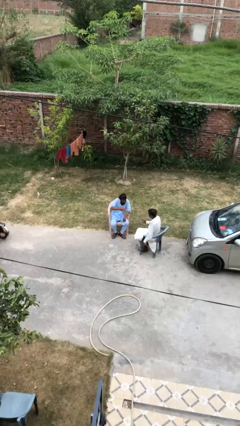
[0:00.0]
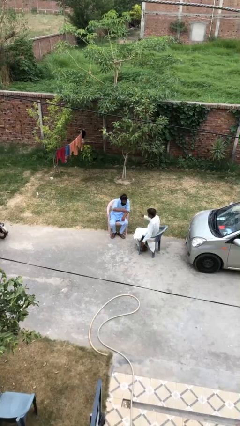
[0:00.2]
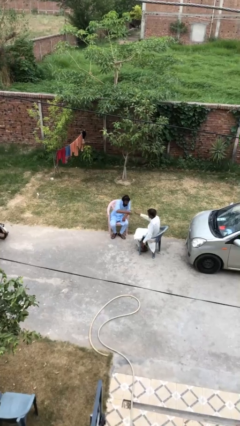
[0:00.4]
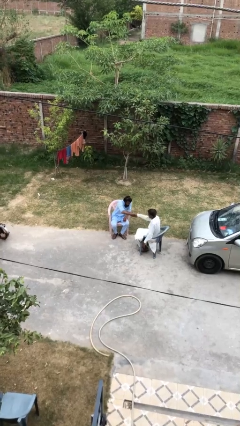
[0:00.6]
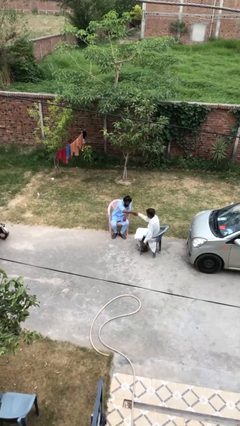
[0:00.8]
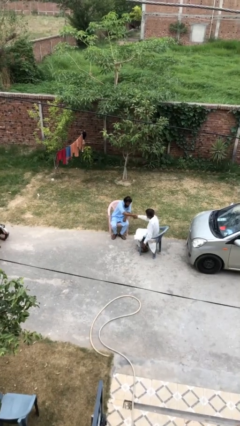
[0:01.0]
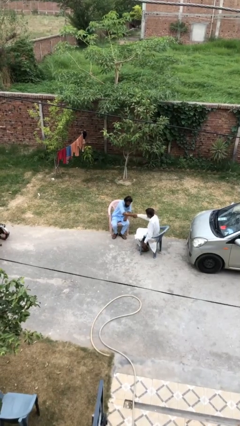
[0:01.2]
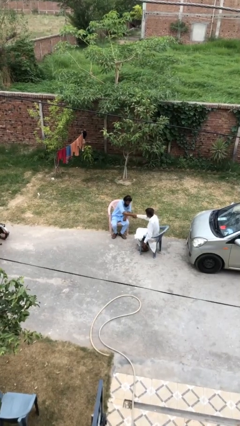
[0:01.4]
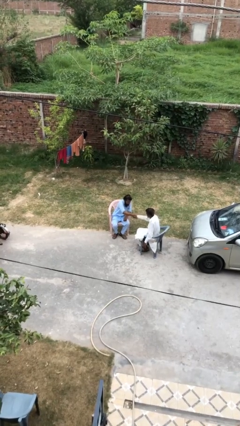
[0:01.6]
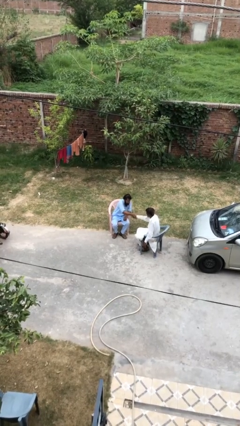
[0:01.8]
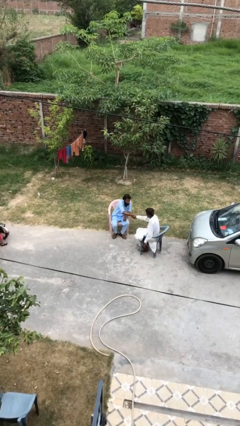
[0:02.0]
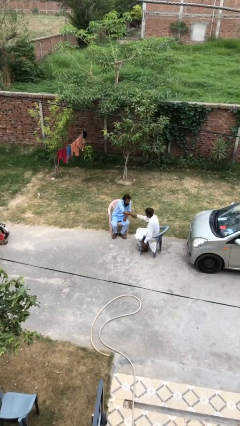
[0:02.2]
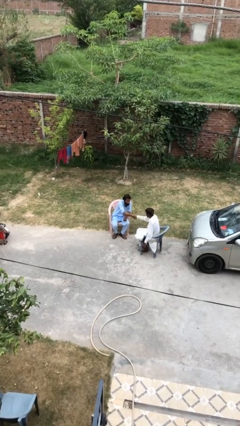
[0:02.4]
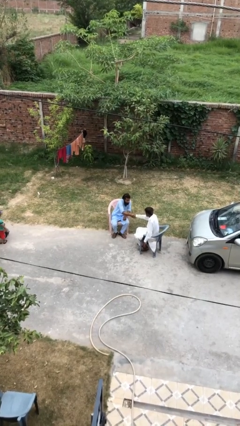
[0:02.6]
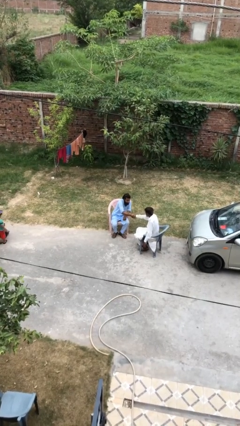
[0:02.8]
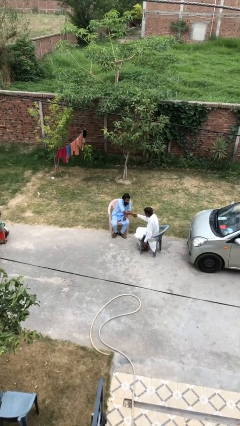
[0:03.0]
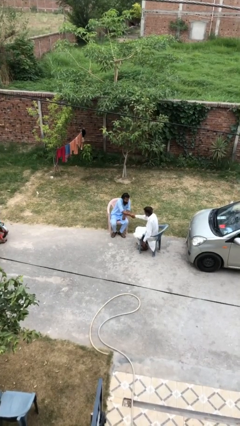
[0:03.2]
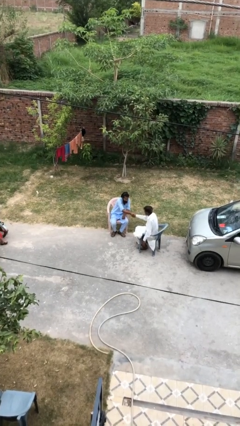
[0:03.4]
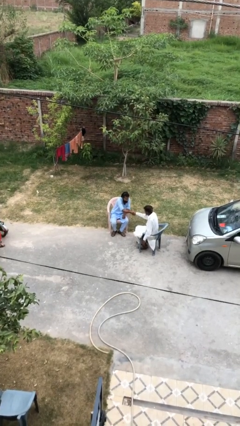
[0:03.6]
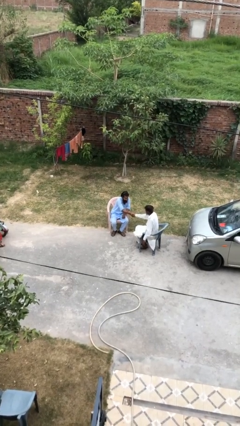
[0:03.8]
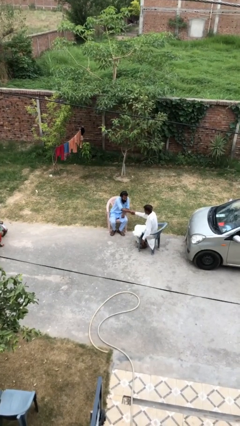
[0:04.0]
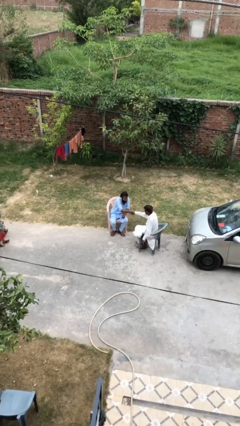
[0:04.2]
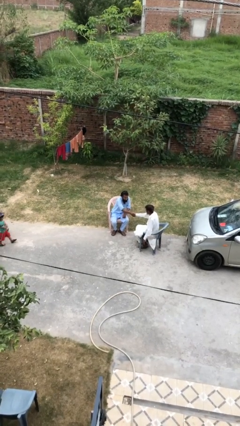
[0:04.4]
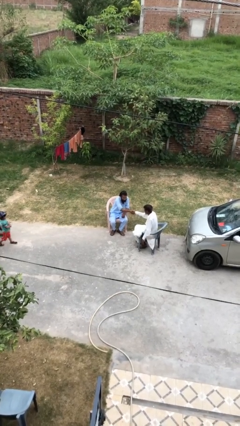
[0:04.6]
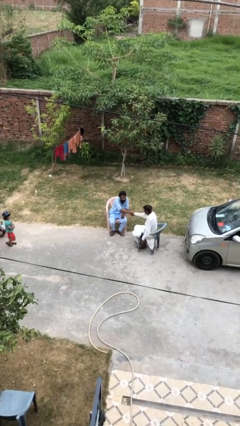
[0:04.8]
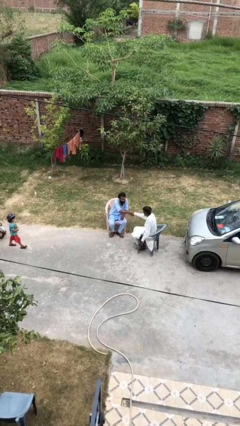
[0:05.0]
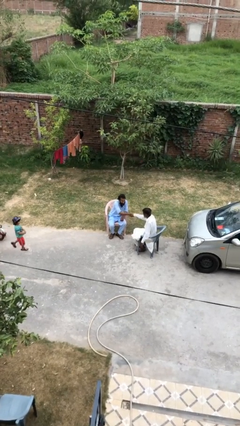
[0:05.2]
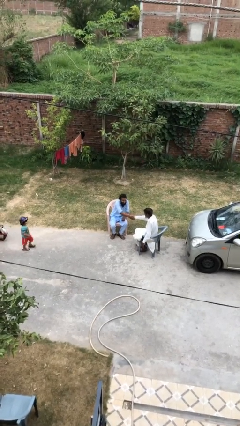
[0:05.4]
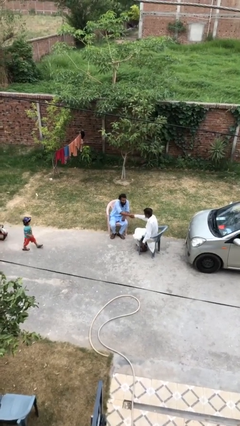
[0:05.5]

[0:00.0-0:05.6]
person shakes hand

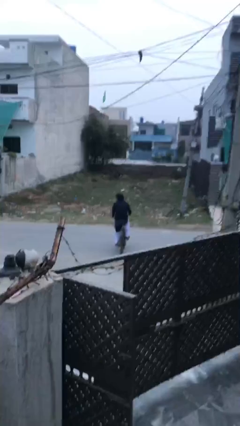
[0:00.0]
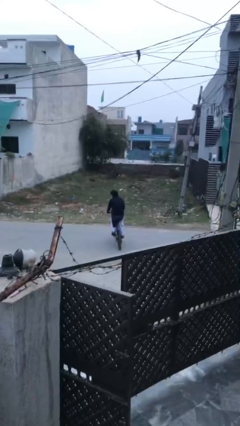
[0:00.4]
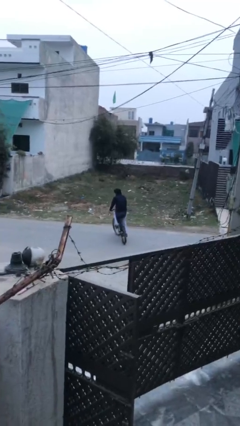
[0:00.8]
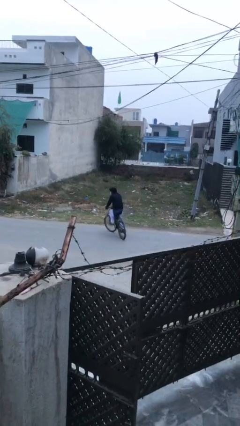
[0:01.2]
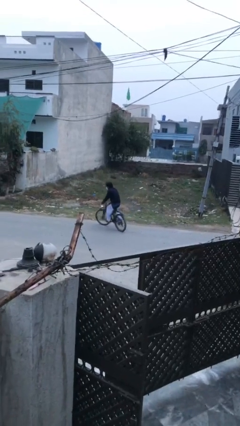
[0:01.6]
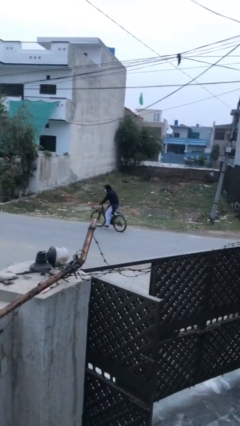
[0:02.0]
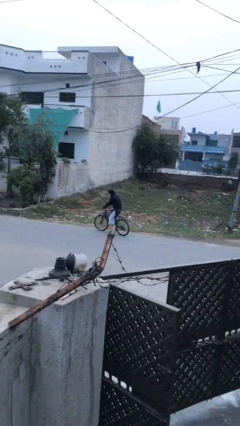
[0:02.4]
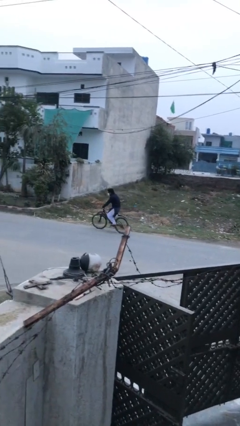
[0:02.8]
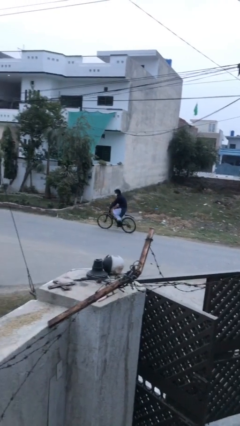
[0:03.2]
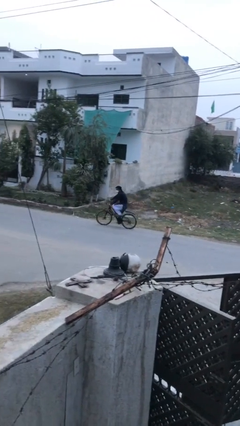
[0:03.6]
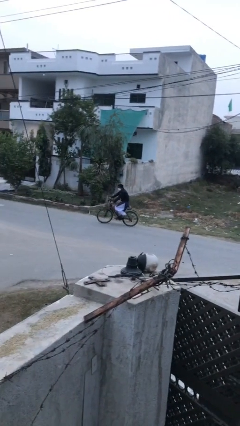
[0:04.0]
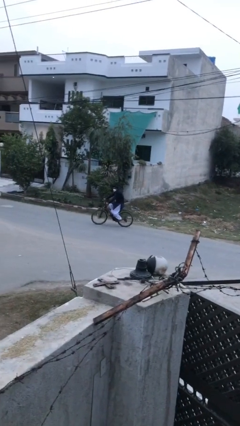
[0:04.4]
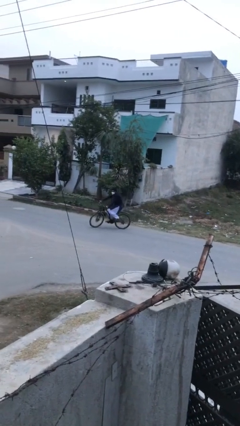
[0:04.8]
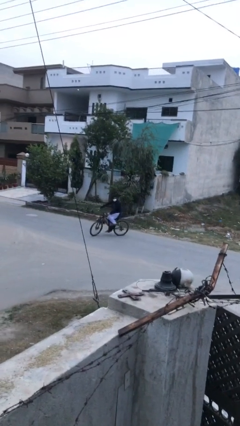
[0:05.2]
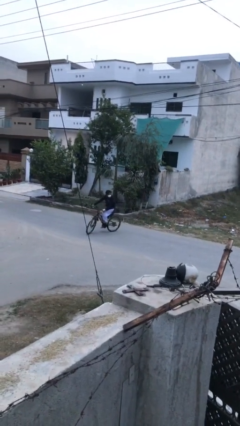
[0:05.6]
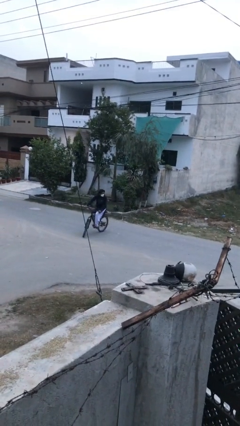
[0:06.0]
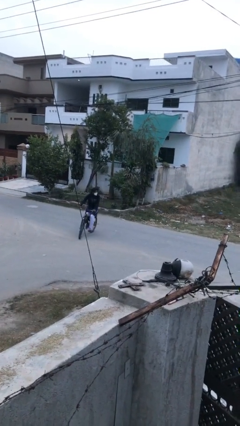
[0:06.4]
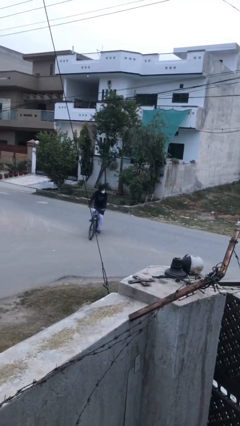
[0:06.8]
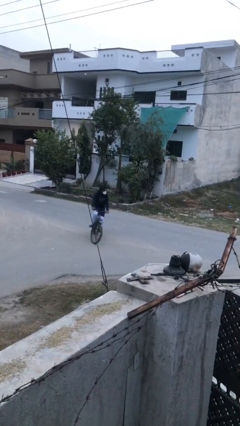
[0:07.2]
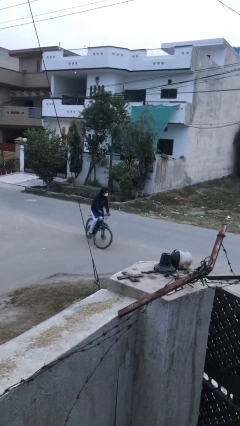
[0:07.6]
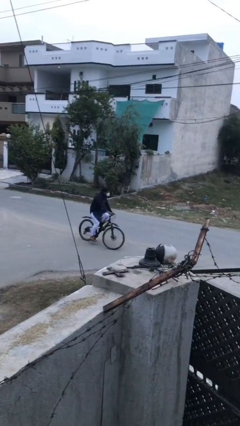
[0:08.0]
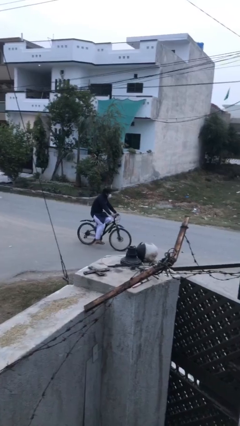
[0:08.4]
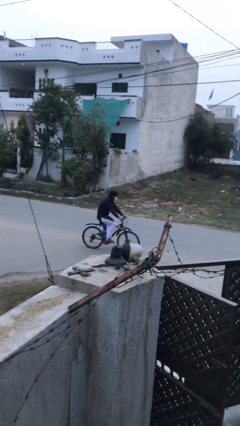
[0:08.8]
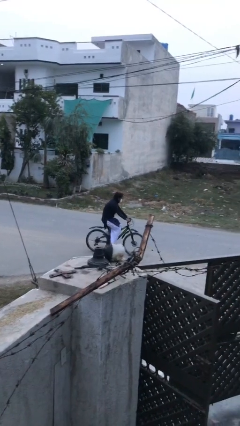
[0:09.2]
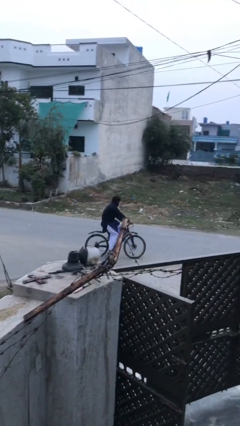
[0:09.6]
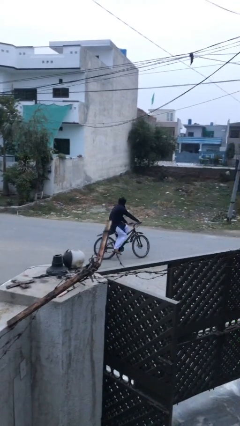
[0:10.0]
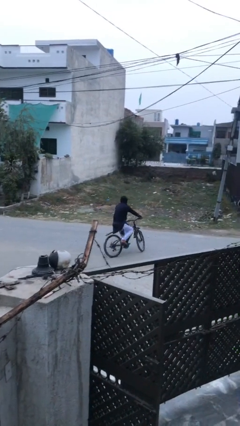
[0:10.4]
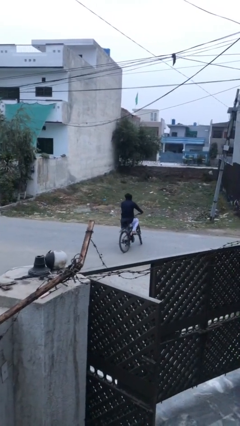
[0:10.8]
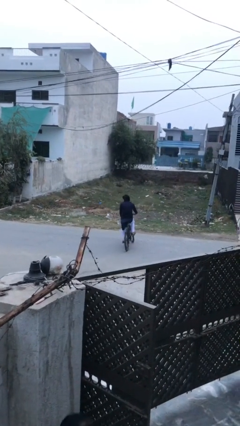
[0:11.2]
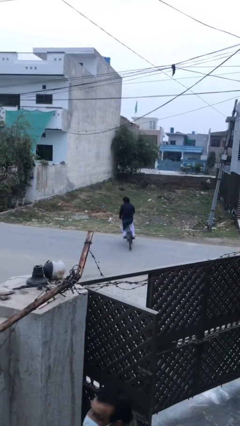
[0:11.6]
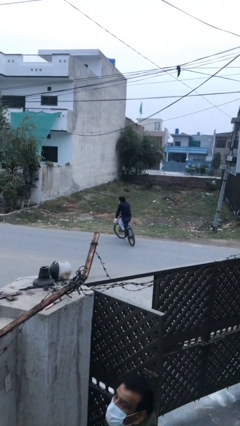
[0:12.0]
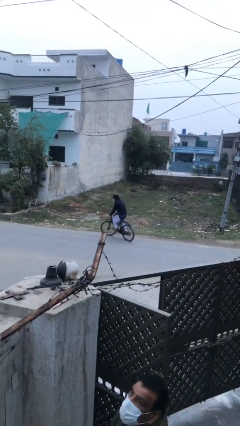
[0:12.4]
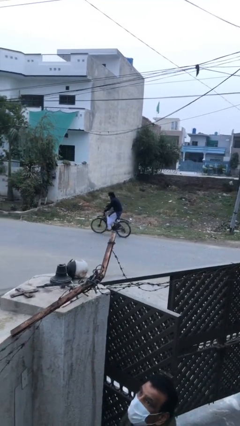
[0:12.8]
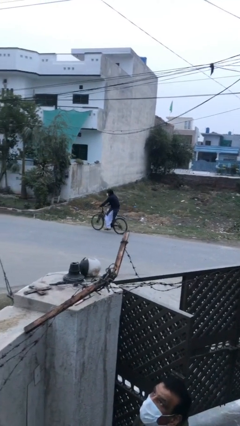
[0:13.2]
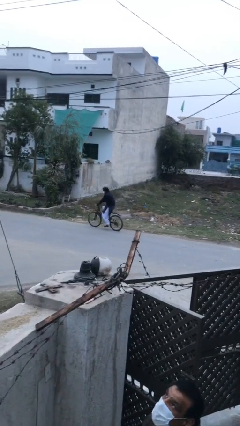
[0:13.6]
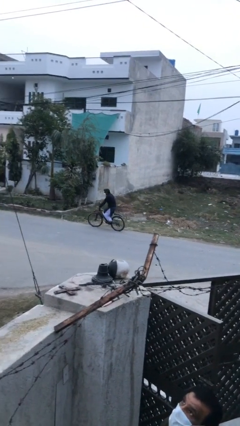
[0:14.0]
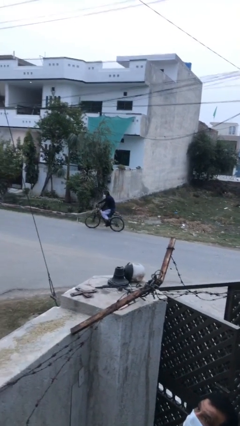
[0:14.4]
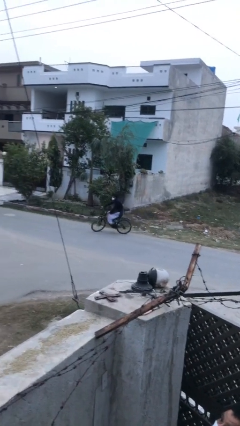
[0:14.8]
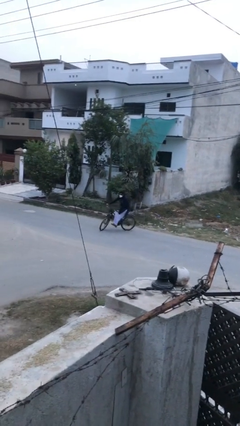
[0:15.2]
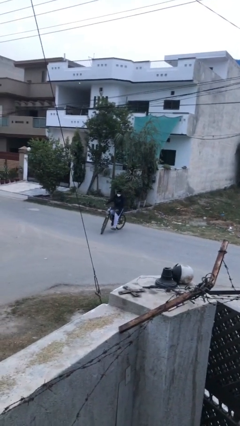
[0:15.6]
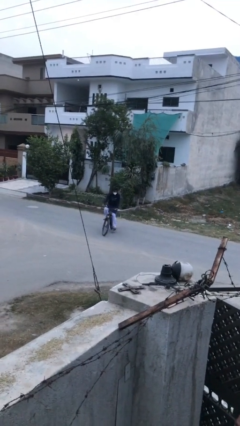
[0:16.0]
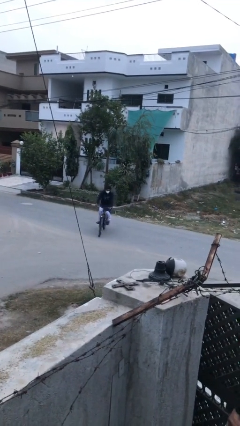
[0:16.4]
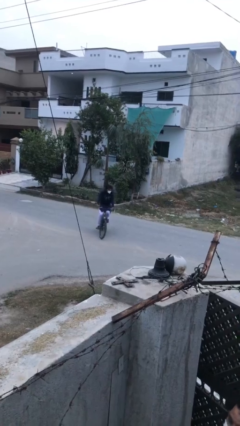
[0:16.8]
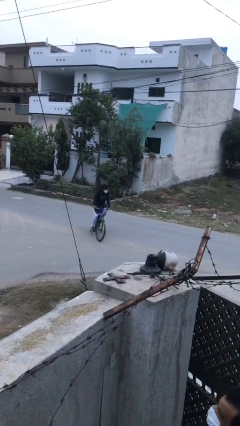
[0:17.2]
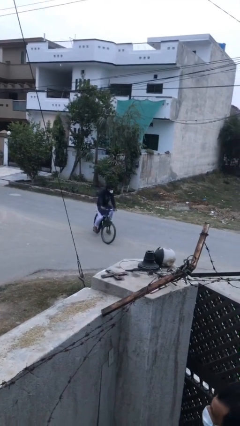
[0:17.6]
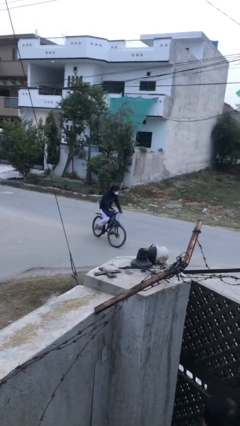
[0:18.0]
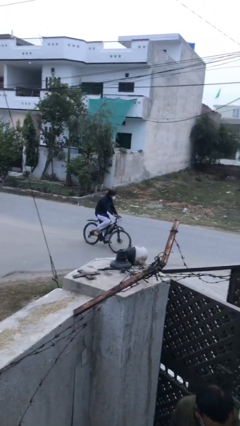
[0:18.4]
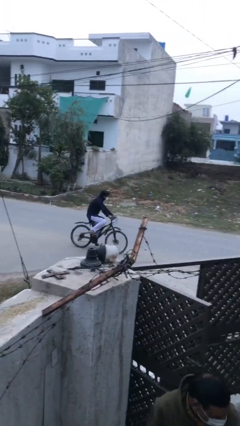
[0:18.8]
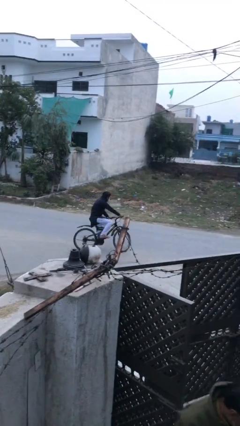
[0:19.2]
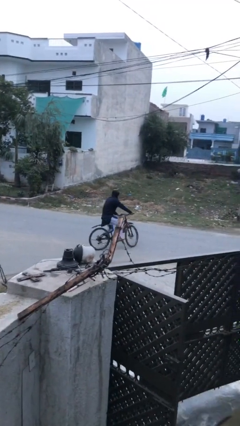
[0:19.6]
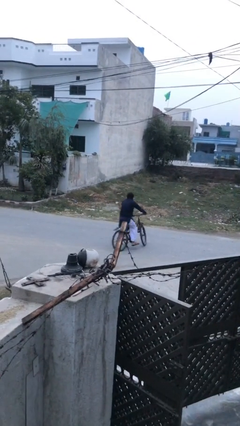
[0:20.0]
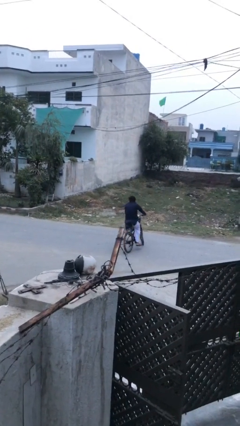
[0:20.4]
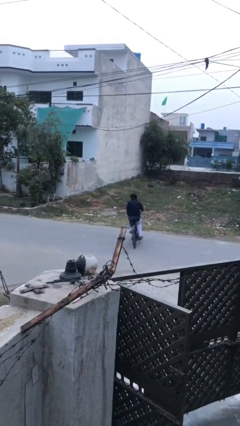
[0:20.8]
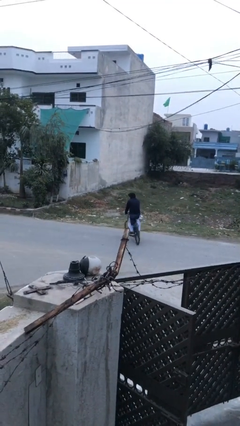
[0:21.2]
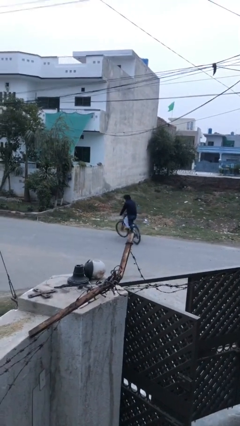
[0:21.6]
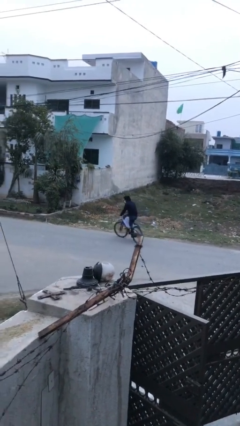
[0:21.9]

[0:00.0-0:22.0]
person rides bicycle

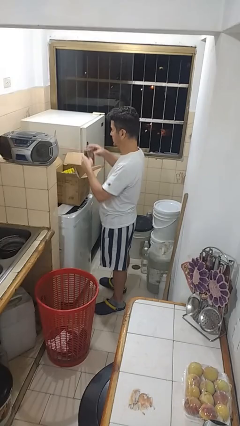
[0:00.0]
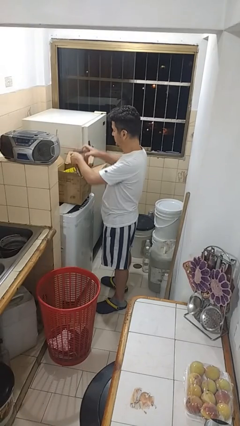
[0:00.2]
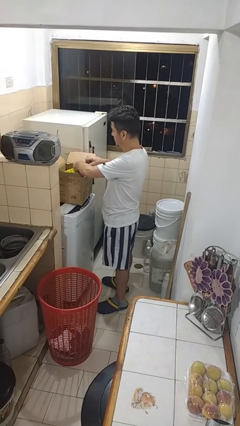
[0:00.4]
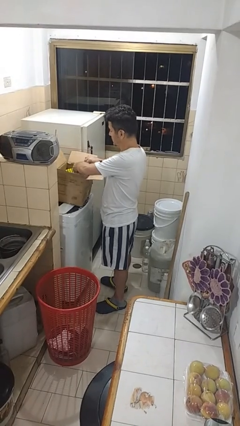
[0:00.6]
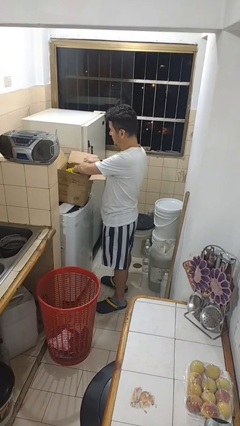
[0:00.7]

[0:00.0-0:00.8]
person puts object into box

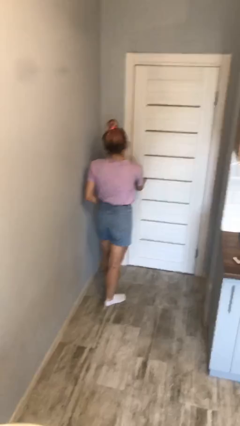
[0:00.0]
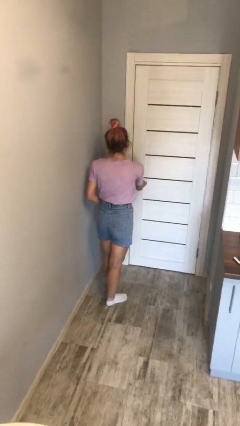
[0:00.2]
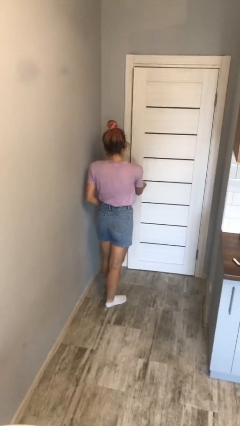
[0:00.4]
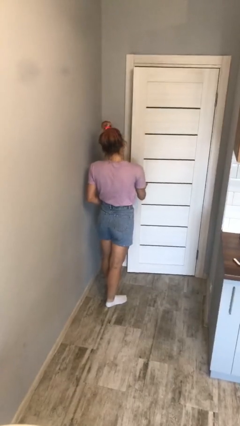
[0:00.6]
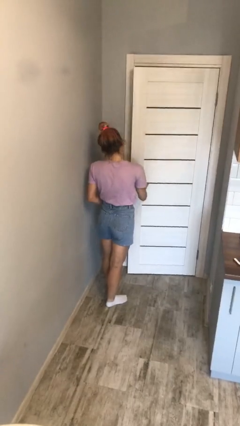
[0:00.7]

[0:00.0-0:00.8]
person opens facility door
